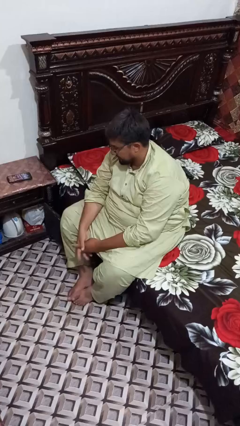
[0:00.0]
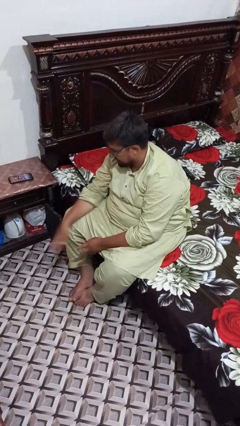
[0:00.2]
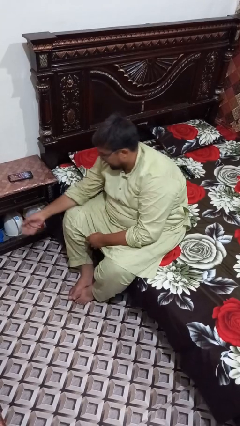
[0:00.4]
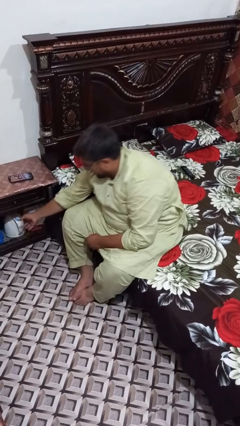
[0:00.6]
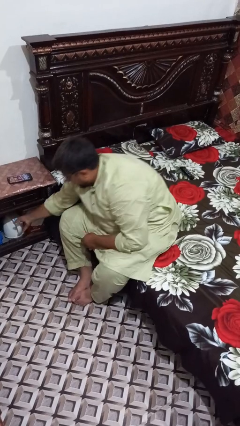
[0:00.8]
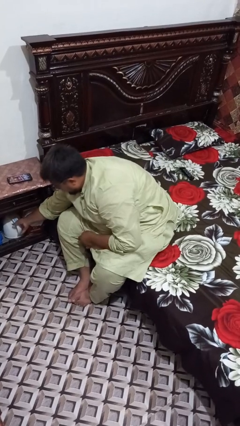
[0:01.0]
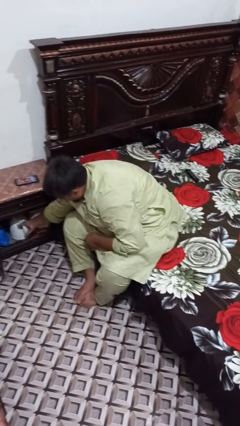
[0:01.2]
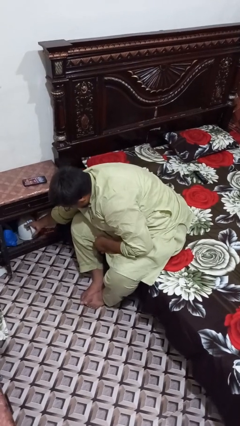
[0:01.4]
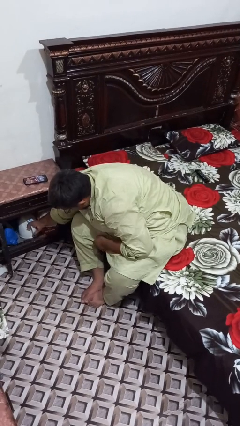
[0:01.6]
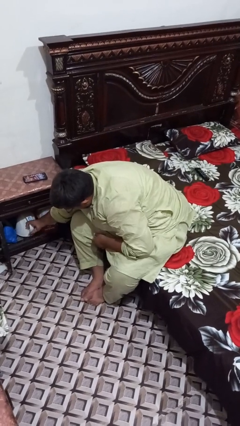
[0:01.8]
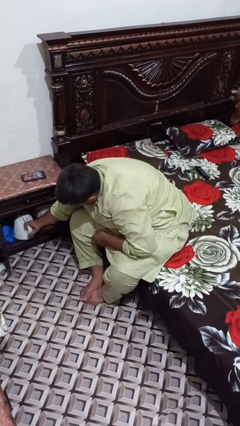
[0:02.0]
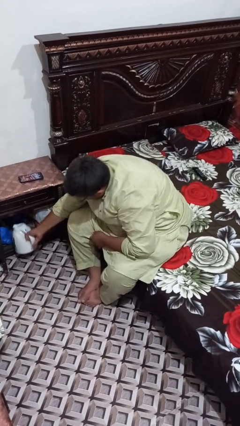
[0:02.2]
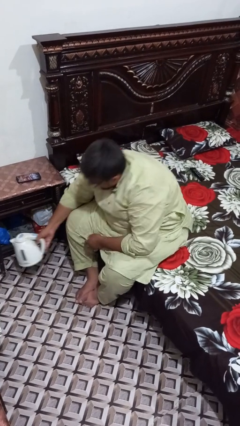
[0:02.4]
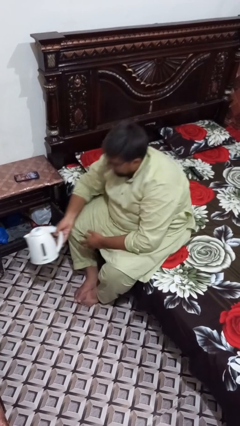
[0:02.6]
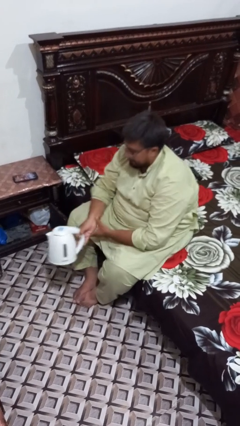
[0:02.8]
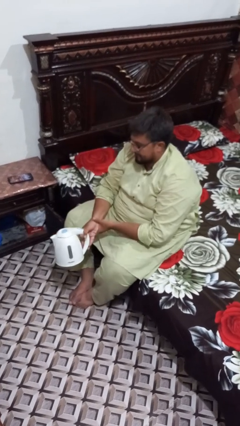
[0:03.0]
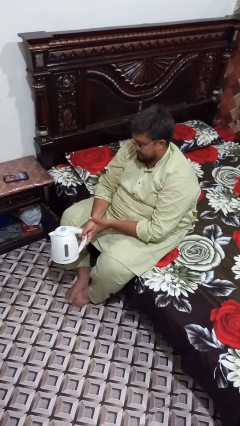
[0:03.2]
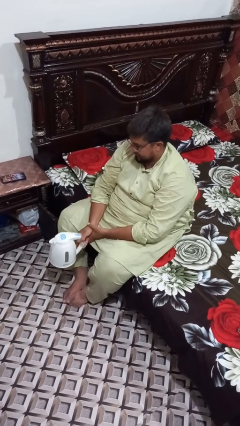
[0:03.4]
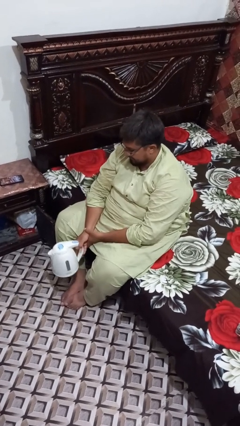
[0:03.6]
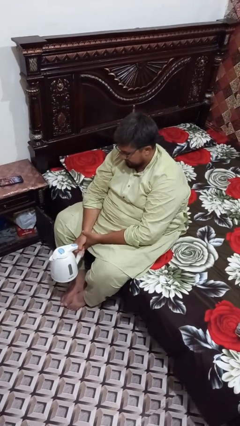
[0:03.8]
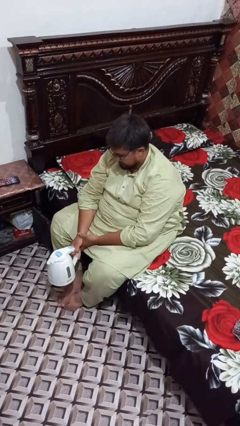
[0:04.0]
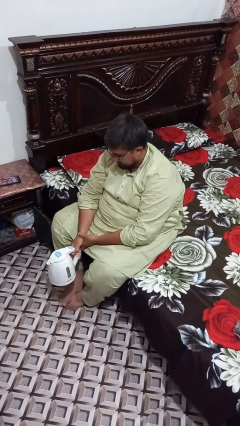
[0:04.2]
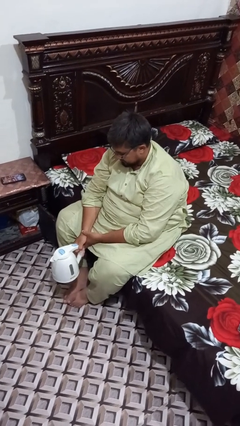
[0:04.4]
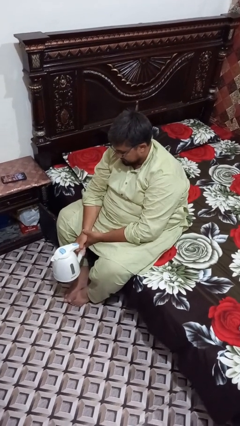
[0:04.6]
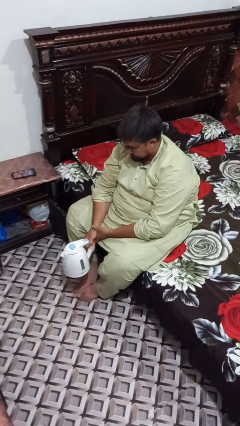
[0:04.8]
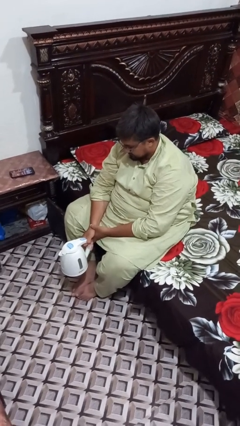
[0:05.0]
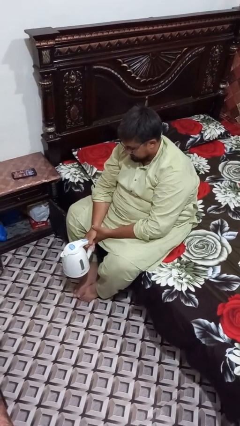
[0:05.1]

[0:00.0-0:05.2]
person picks up object from cabinet

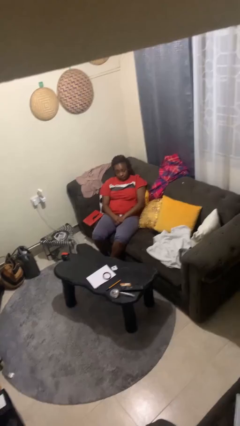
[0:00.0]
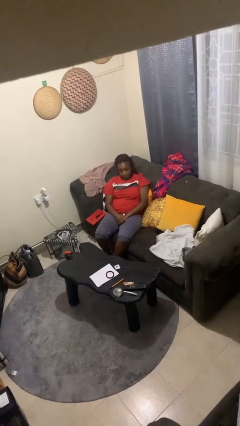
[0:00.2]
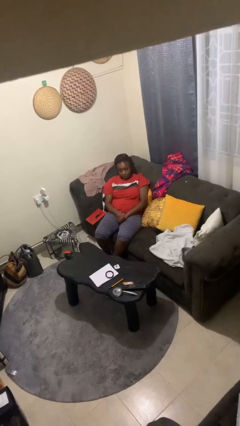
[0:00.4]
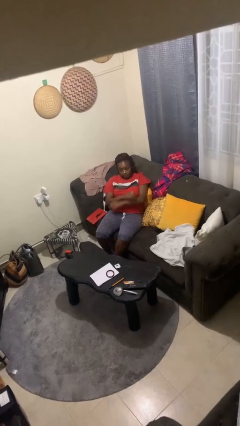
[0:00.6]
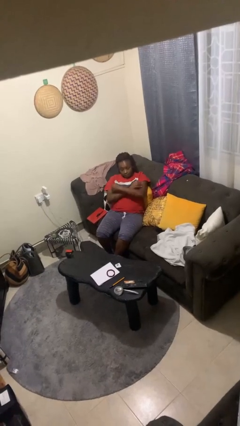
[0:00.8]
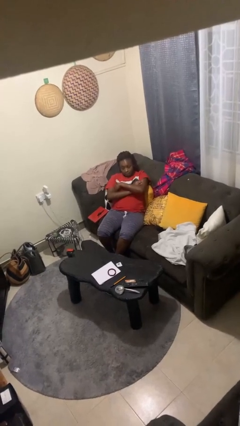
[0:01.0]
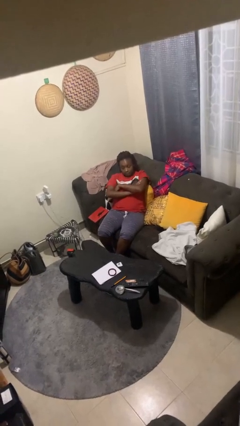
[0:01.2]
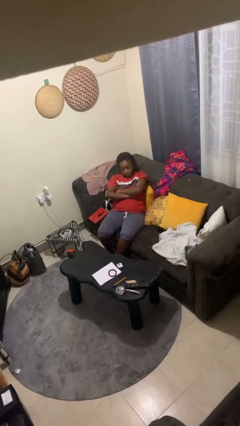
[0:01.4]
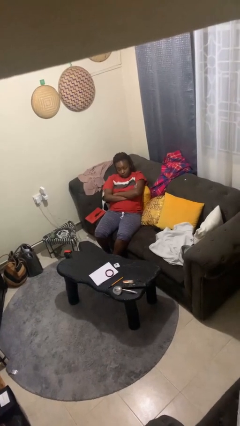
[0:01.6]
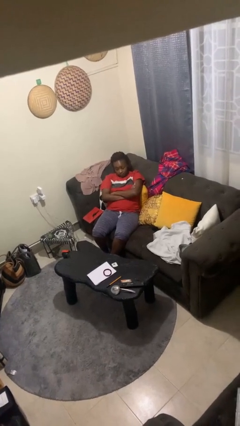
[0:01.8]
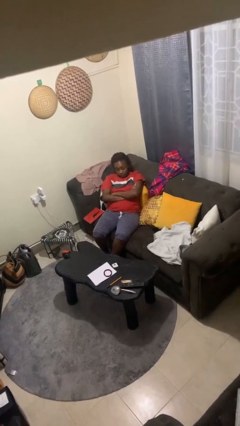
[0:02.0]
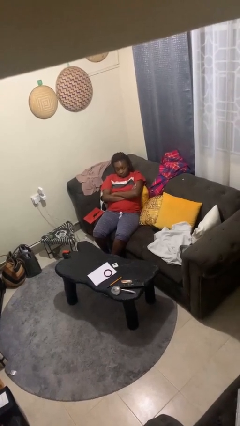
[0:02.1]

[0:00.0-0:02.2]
person crosses arms

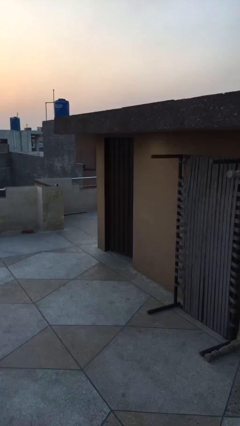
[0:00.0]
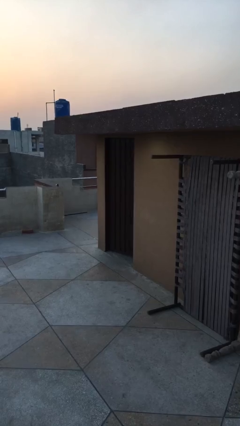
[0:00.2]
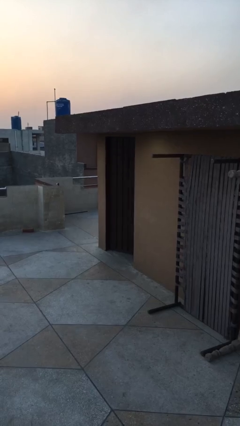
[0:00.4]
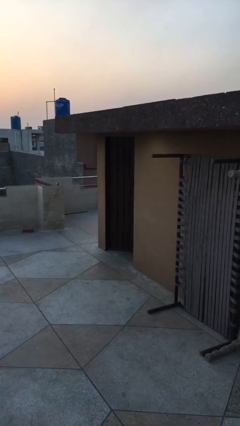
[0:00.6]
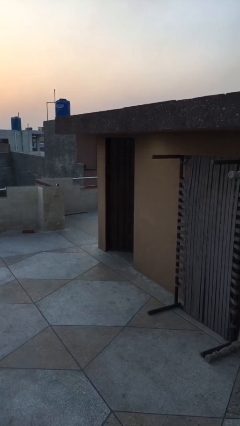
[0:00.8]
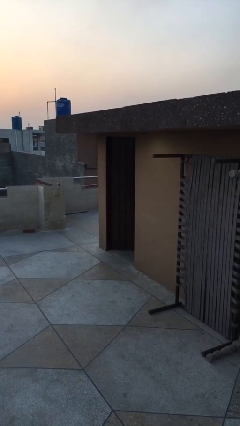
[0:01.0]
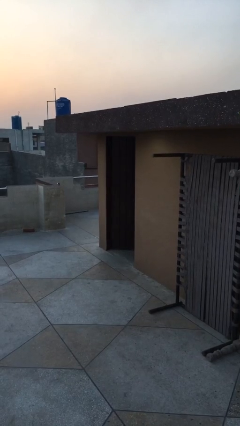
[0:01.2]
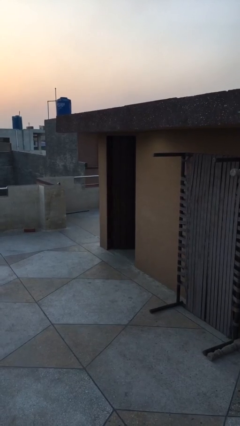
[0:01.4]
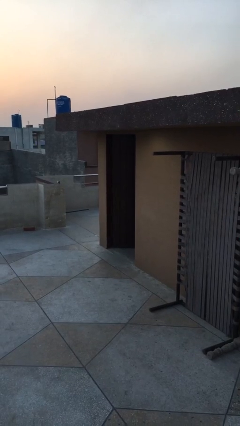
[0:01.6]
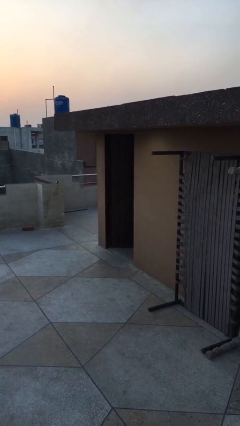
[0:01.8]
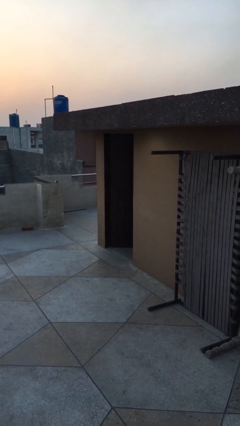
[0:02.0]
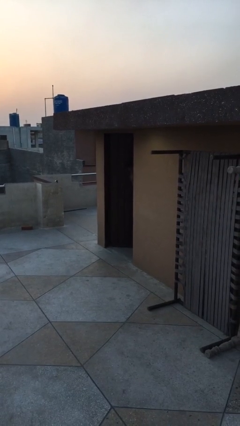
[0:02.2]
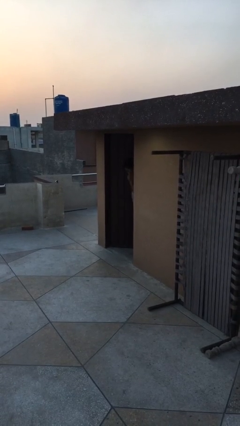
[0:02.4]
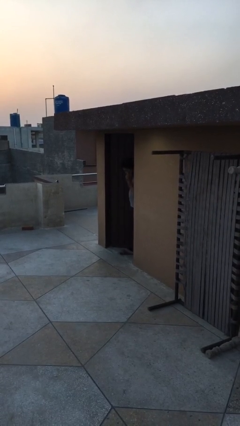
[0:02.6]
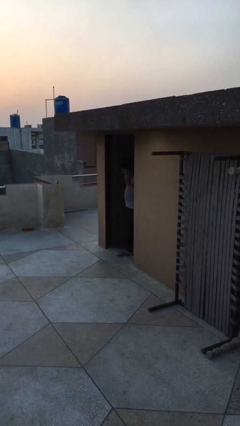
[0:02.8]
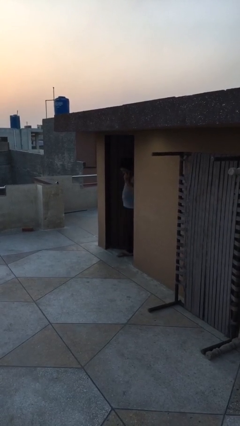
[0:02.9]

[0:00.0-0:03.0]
person opens facility door

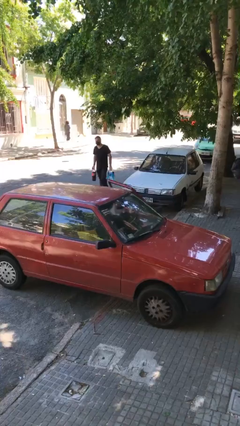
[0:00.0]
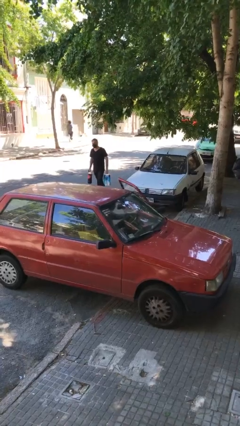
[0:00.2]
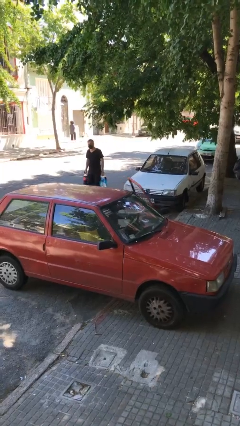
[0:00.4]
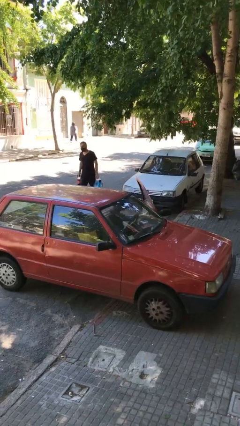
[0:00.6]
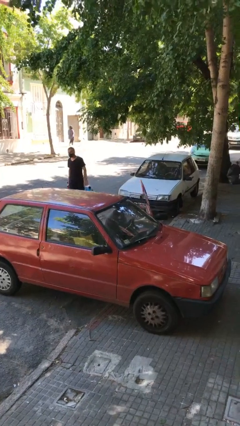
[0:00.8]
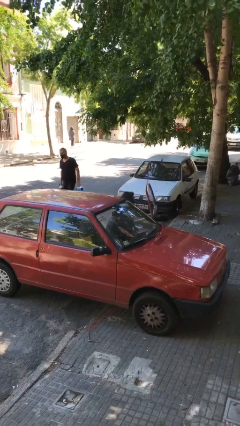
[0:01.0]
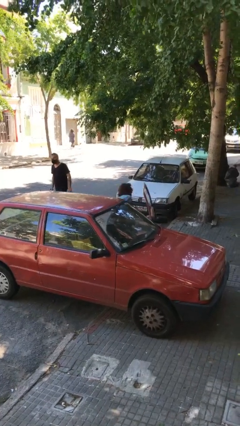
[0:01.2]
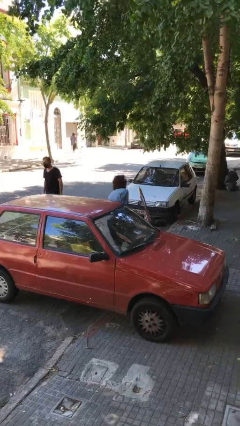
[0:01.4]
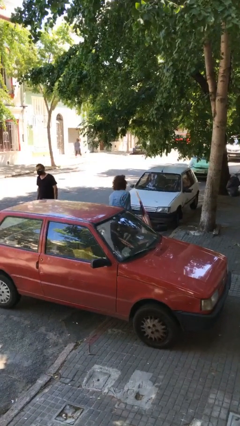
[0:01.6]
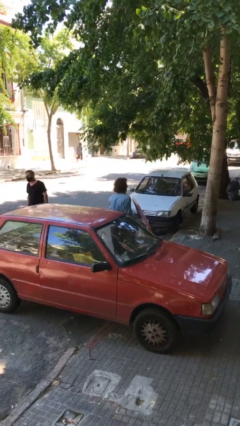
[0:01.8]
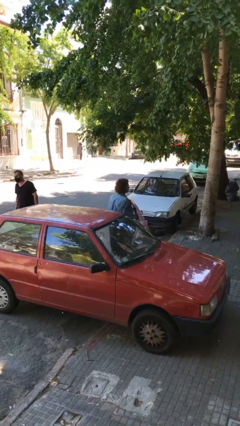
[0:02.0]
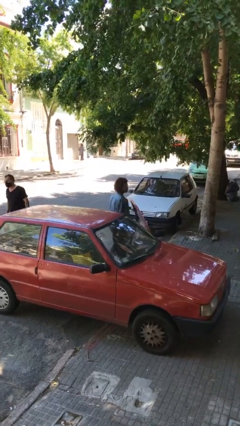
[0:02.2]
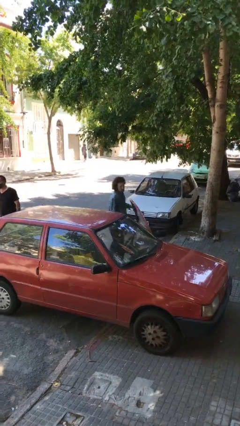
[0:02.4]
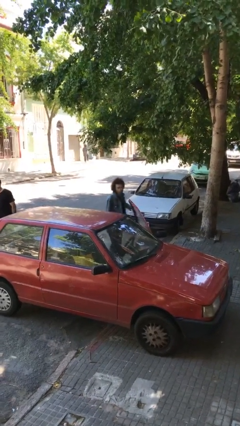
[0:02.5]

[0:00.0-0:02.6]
car drops off person

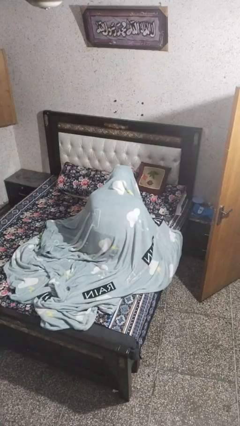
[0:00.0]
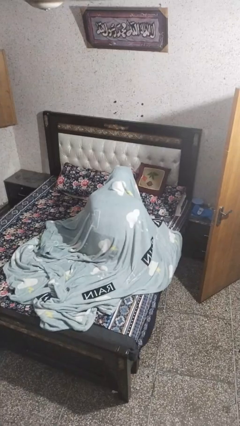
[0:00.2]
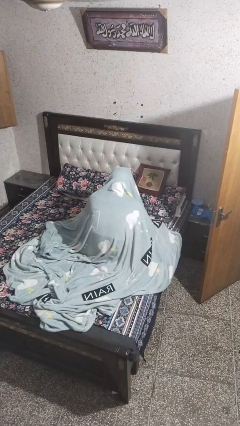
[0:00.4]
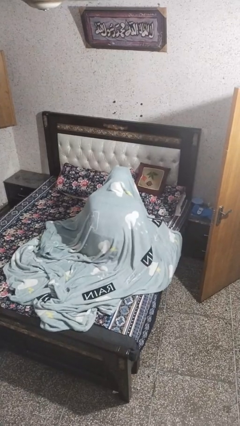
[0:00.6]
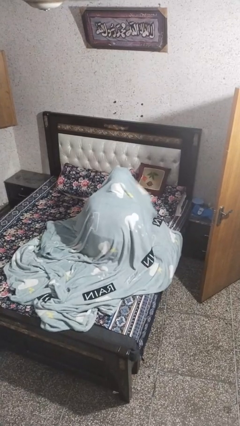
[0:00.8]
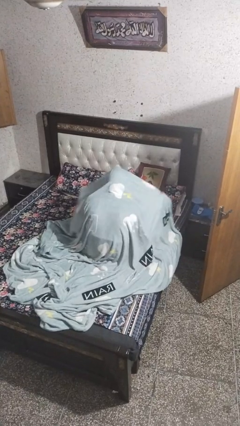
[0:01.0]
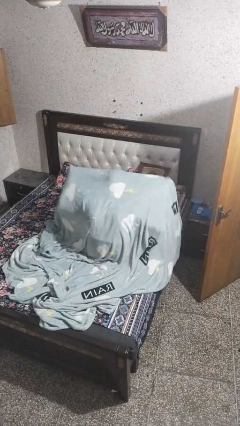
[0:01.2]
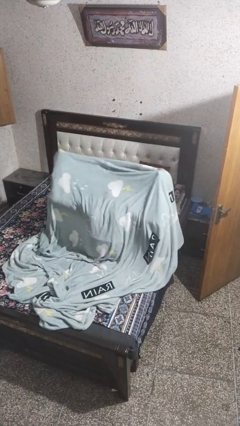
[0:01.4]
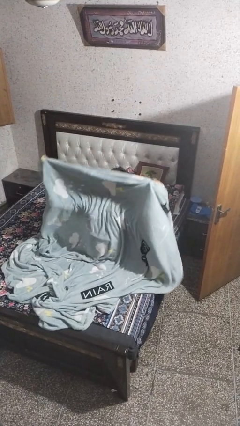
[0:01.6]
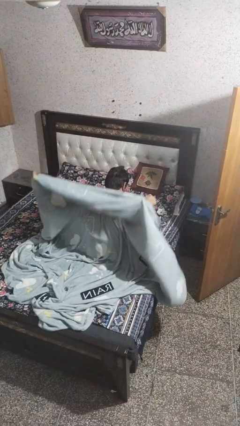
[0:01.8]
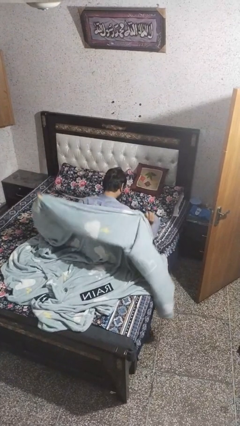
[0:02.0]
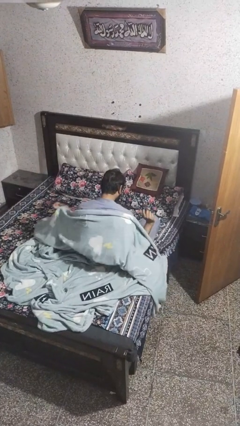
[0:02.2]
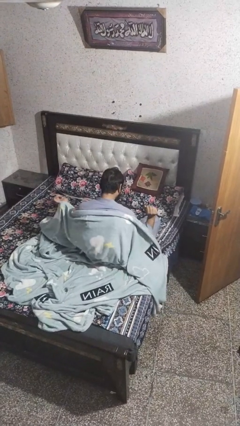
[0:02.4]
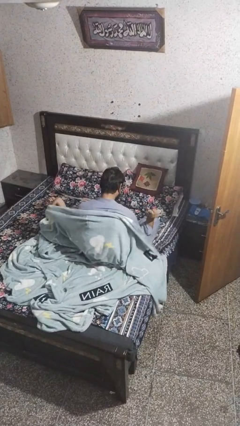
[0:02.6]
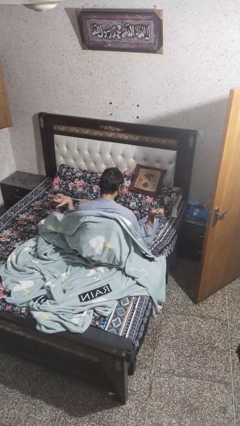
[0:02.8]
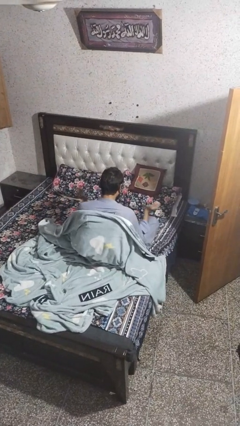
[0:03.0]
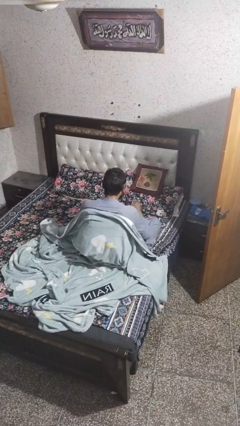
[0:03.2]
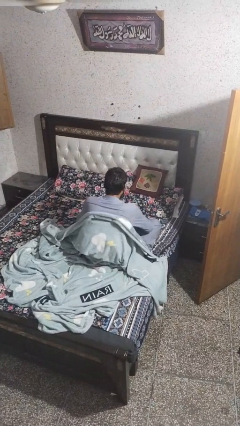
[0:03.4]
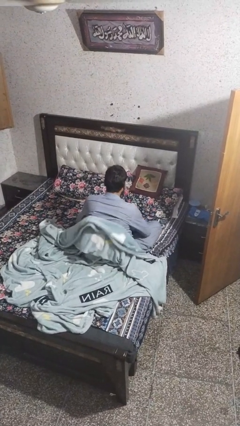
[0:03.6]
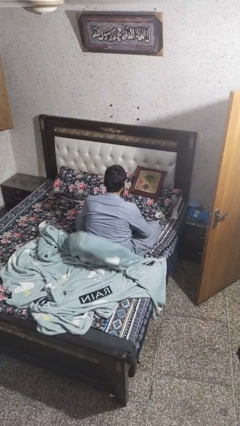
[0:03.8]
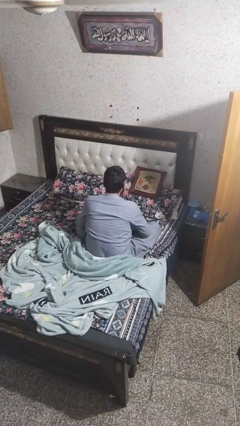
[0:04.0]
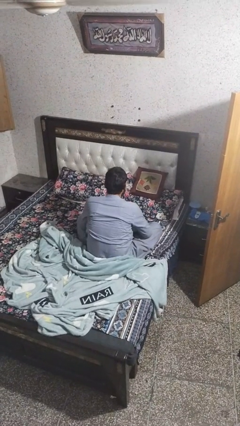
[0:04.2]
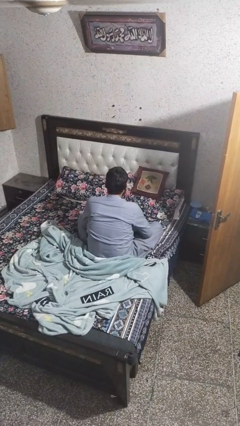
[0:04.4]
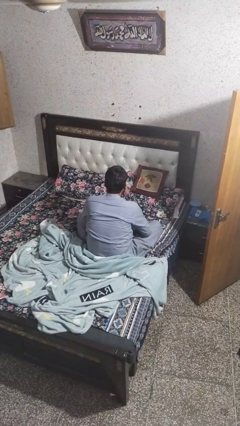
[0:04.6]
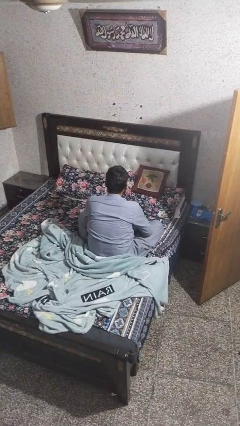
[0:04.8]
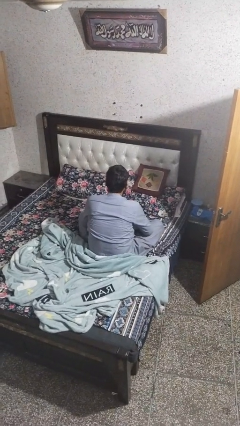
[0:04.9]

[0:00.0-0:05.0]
person uncovers with blanket
